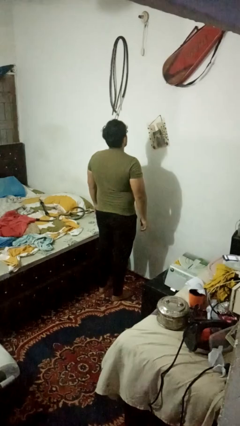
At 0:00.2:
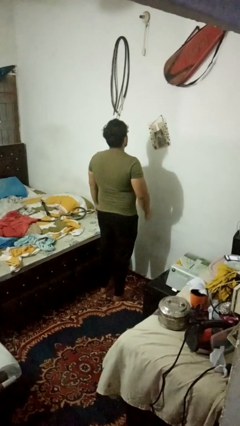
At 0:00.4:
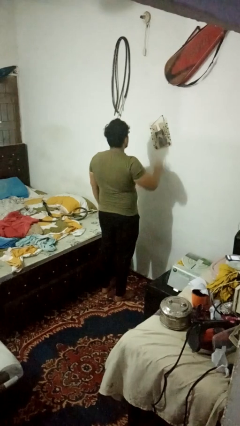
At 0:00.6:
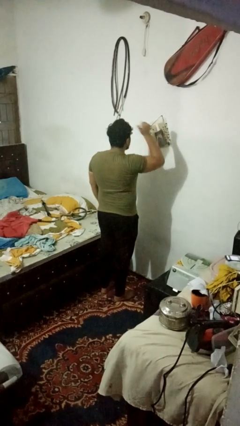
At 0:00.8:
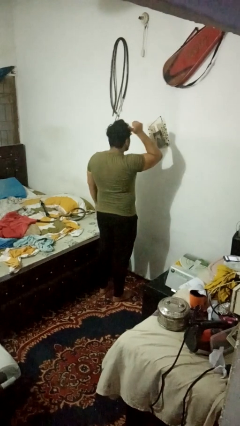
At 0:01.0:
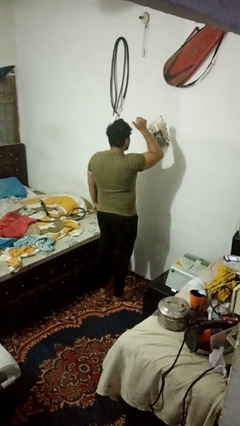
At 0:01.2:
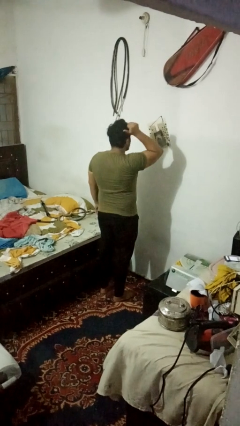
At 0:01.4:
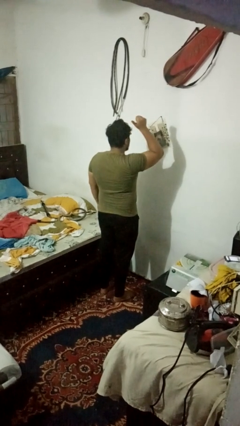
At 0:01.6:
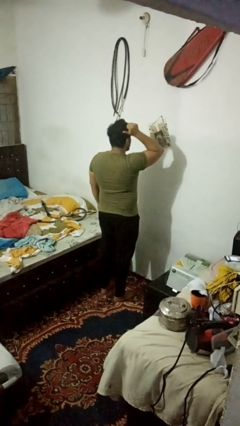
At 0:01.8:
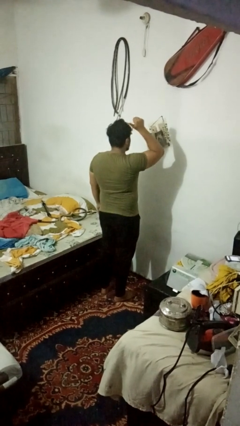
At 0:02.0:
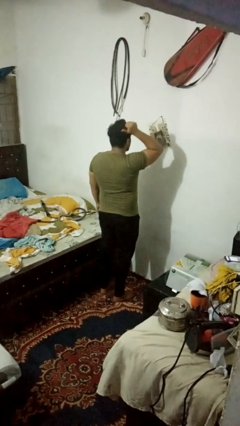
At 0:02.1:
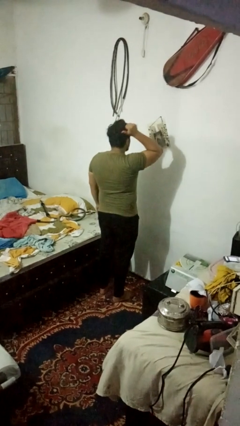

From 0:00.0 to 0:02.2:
person gestures behind me

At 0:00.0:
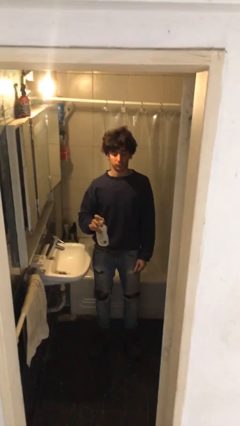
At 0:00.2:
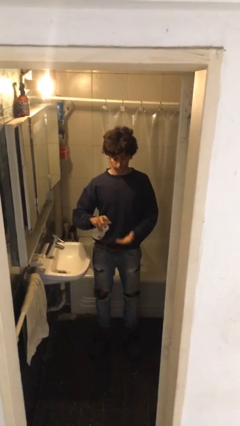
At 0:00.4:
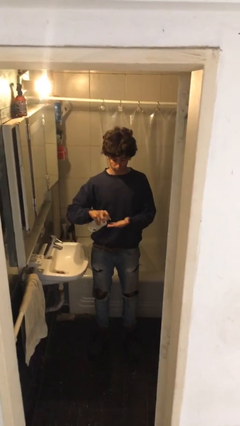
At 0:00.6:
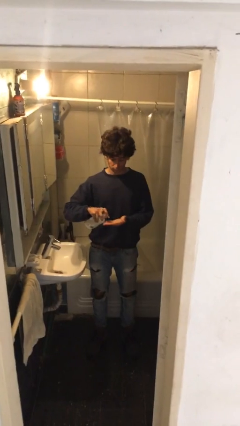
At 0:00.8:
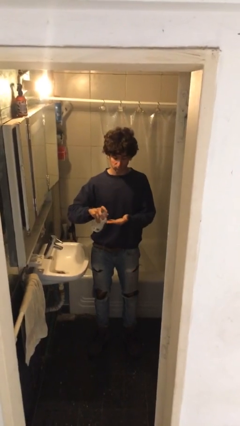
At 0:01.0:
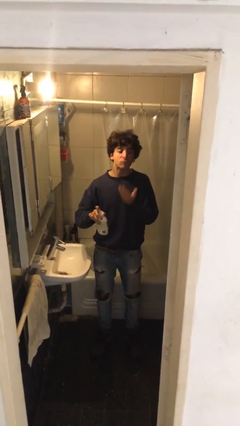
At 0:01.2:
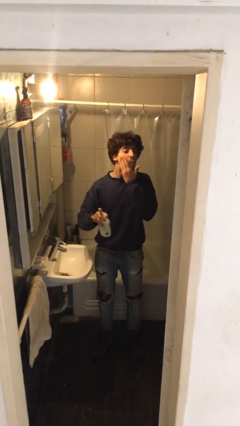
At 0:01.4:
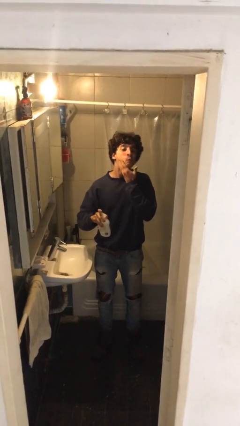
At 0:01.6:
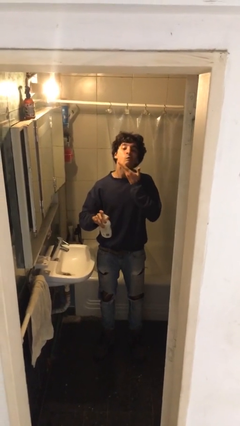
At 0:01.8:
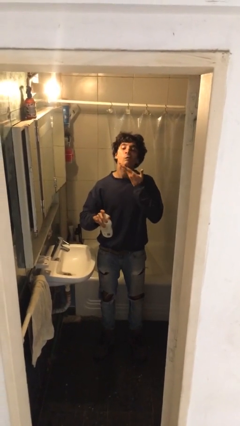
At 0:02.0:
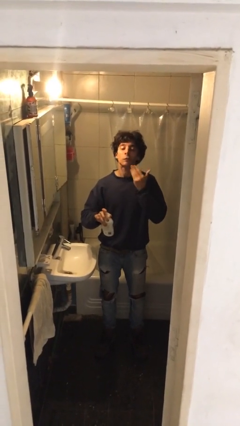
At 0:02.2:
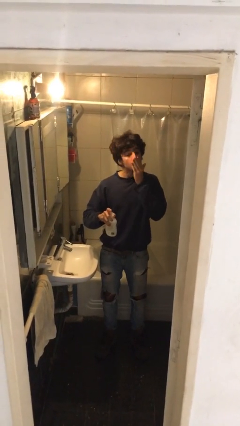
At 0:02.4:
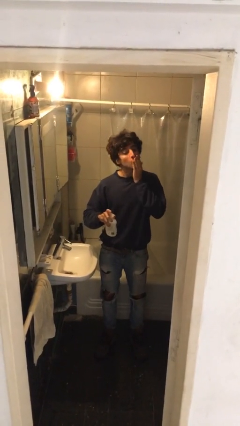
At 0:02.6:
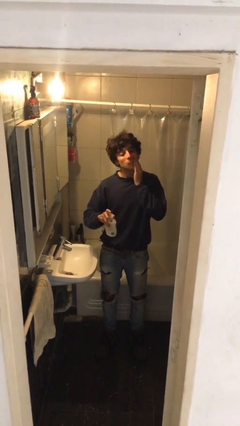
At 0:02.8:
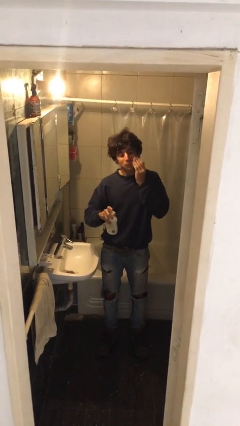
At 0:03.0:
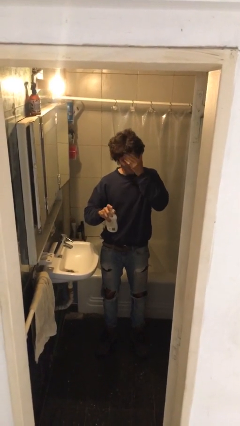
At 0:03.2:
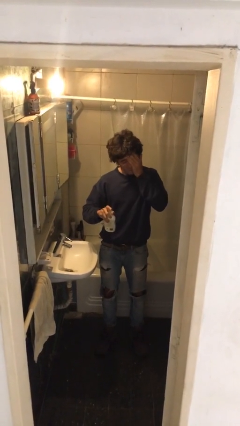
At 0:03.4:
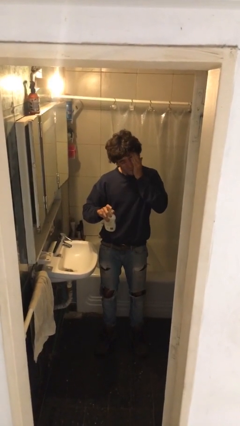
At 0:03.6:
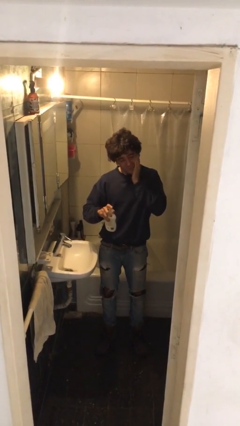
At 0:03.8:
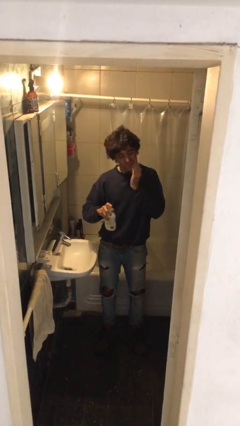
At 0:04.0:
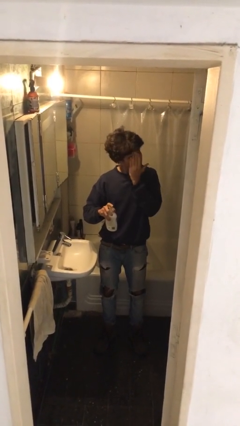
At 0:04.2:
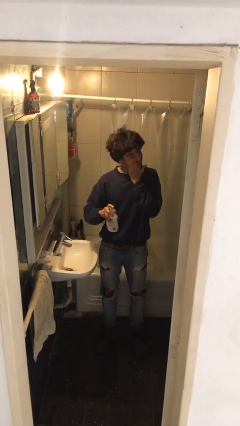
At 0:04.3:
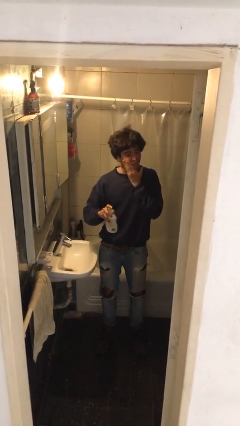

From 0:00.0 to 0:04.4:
person applies facial moisturizer

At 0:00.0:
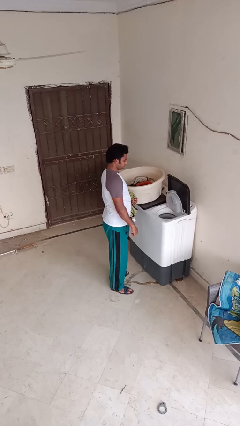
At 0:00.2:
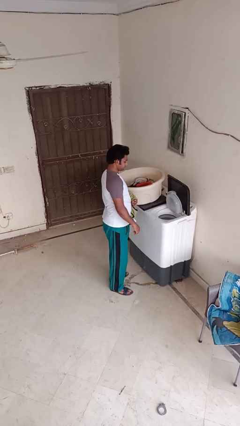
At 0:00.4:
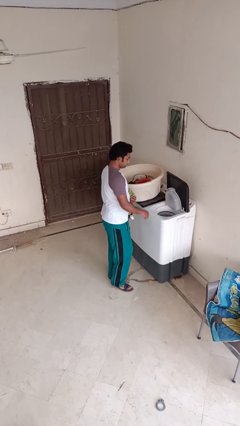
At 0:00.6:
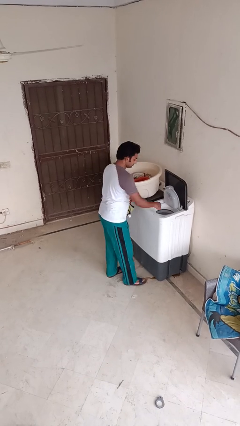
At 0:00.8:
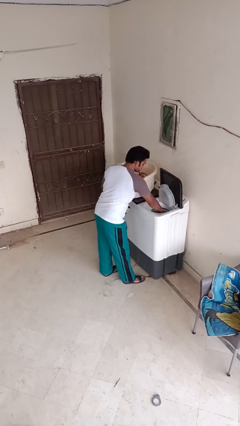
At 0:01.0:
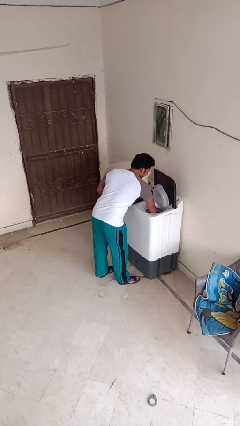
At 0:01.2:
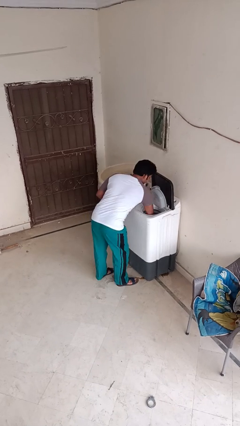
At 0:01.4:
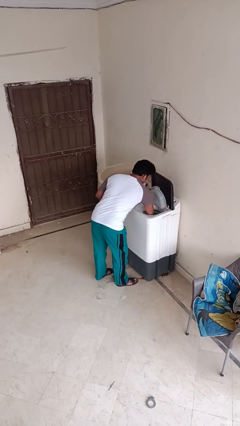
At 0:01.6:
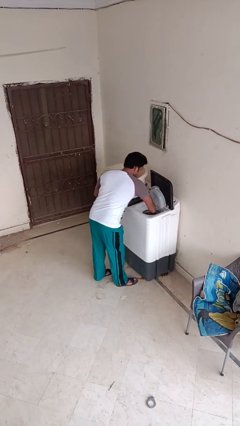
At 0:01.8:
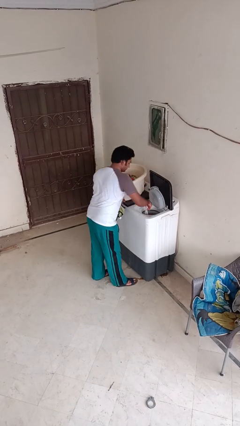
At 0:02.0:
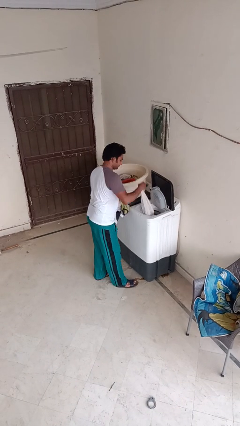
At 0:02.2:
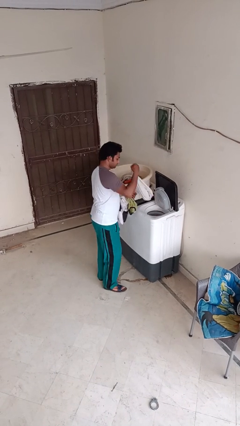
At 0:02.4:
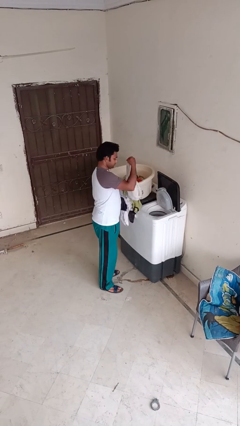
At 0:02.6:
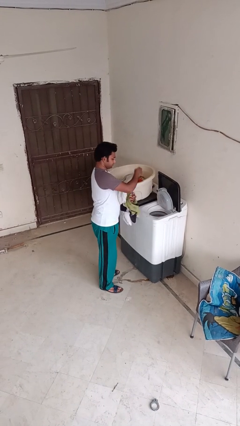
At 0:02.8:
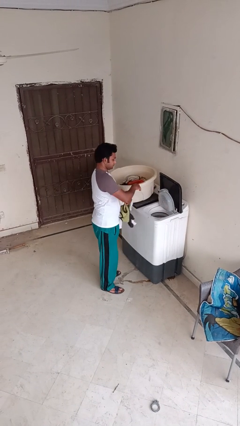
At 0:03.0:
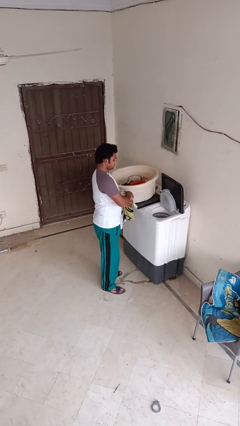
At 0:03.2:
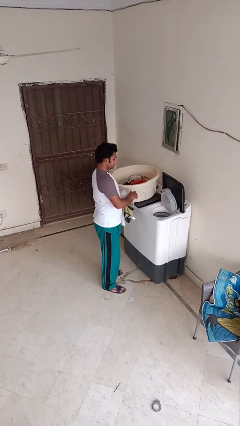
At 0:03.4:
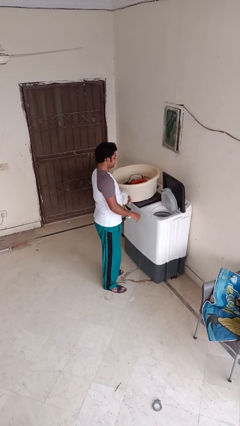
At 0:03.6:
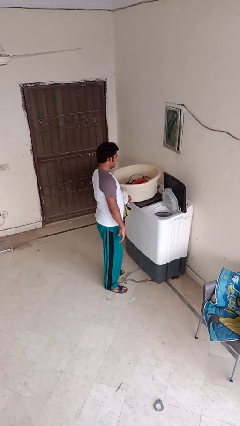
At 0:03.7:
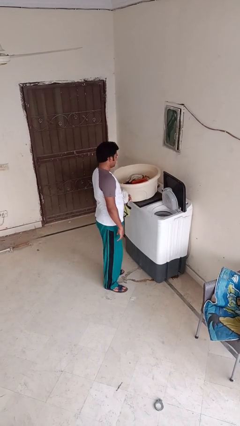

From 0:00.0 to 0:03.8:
person unloads dryer

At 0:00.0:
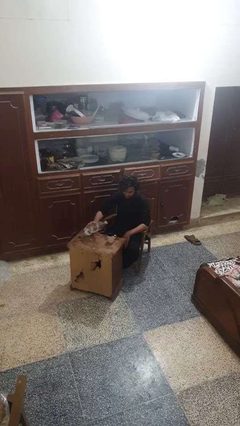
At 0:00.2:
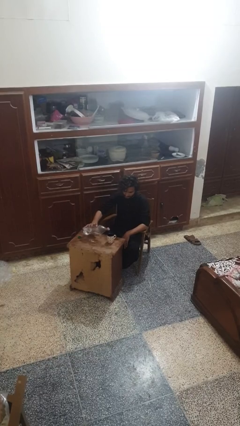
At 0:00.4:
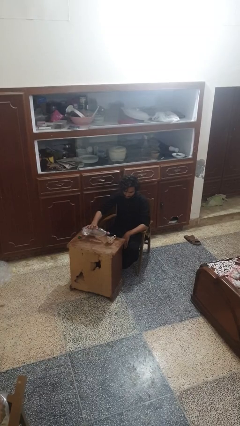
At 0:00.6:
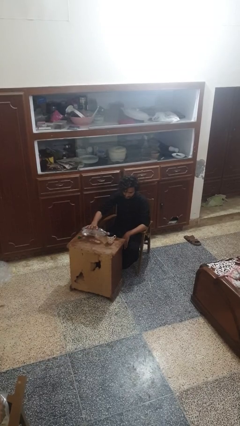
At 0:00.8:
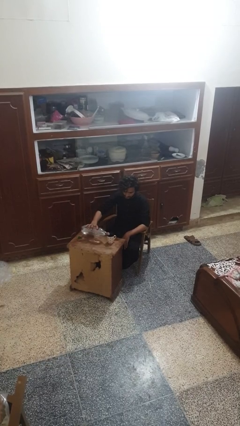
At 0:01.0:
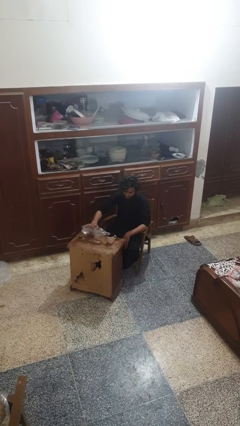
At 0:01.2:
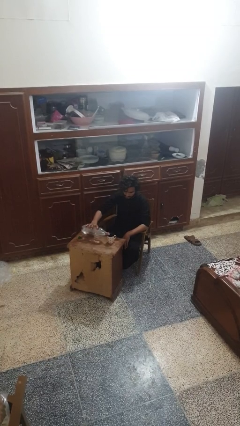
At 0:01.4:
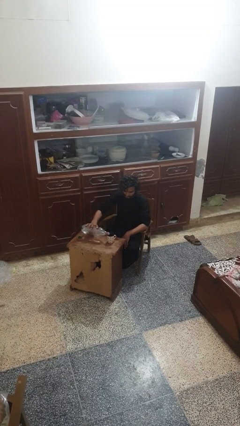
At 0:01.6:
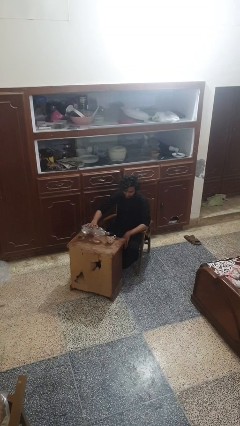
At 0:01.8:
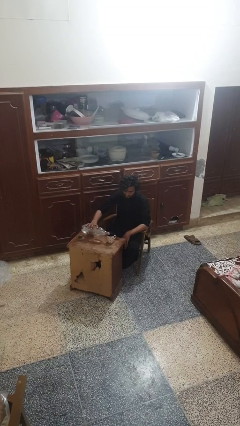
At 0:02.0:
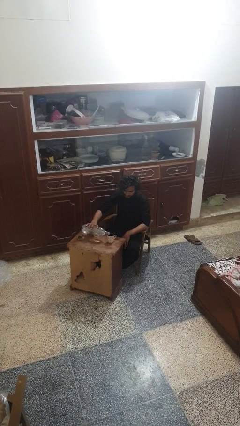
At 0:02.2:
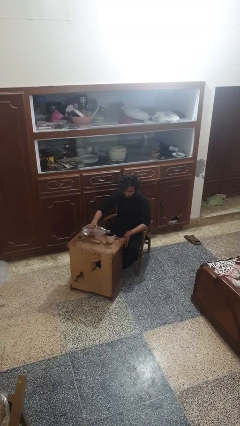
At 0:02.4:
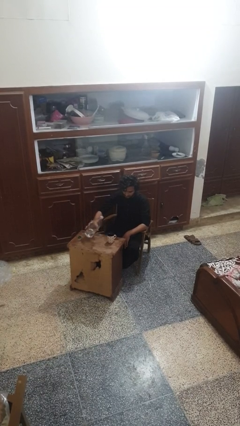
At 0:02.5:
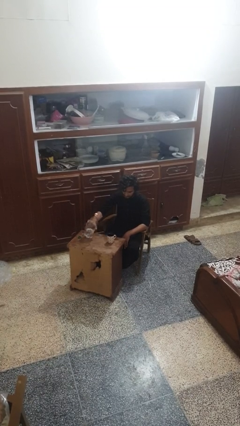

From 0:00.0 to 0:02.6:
person pours liquid into cup

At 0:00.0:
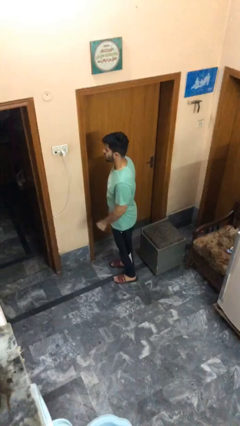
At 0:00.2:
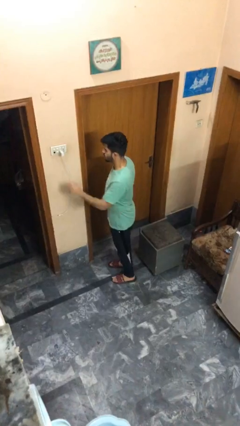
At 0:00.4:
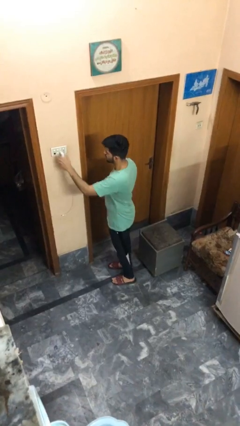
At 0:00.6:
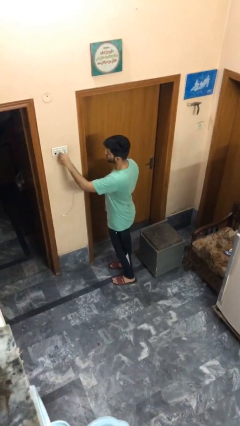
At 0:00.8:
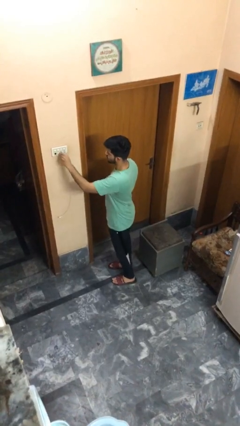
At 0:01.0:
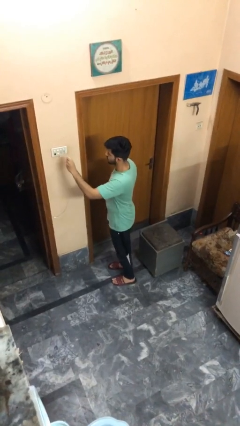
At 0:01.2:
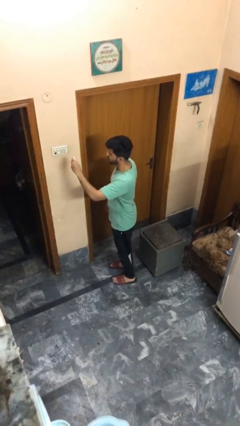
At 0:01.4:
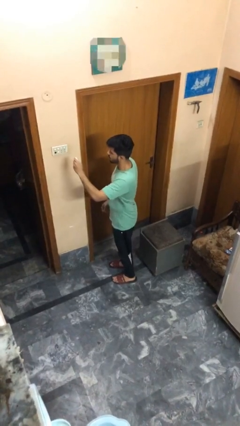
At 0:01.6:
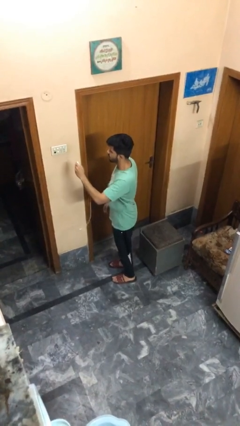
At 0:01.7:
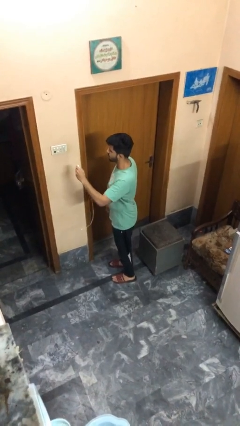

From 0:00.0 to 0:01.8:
person unplugs from electrical socket

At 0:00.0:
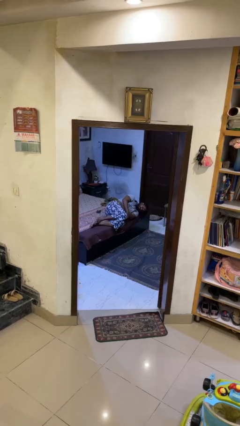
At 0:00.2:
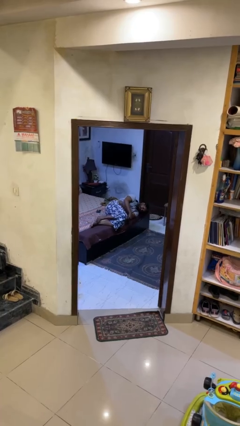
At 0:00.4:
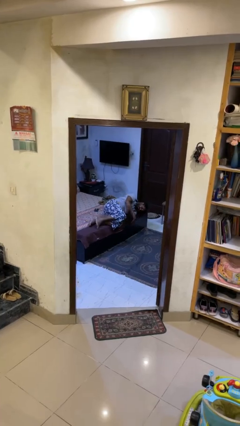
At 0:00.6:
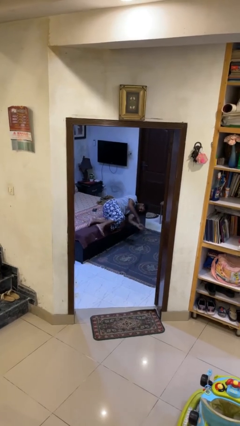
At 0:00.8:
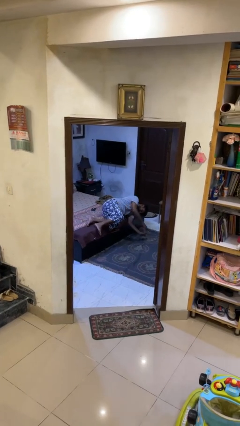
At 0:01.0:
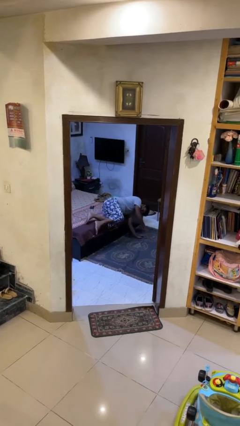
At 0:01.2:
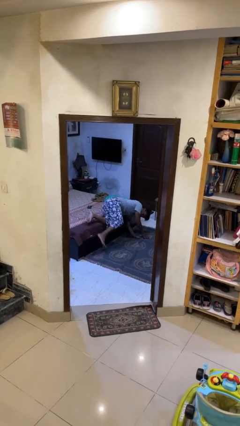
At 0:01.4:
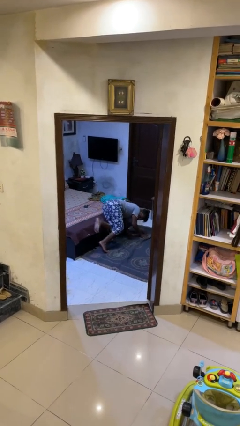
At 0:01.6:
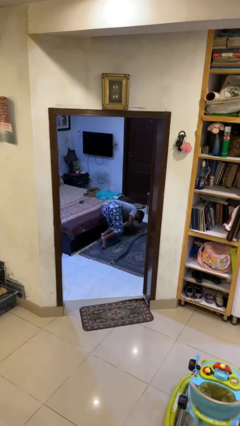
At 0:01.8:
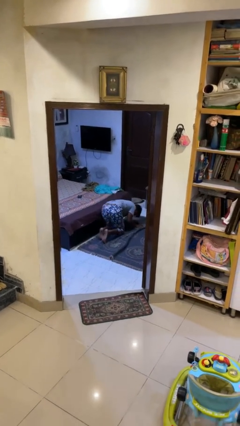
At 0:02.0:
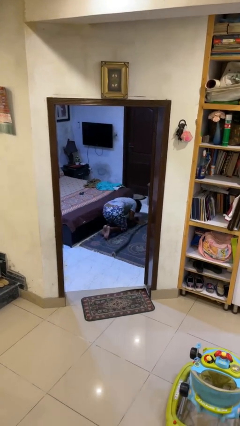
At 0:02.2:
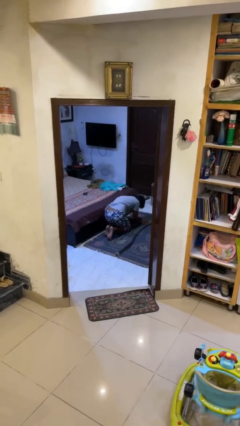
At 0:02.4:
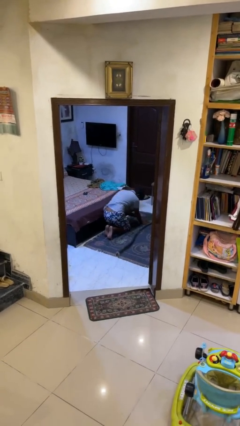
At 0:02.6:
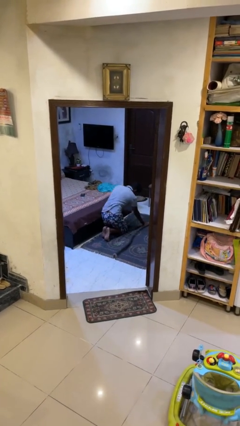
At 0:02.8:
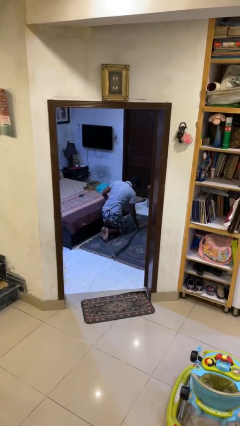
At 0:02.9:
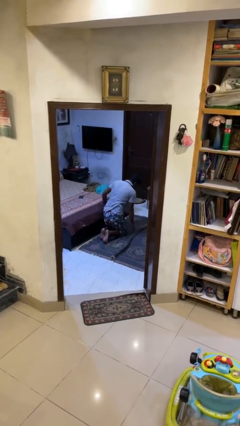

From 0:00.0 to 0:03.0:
person falls from bed
